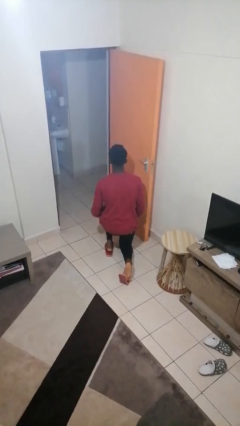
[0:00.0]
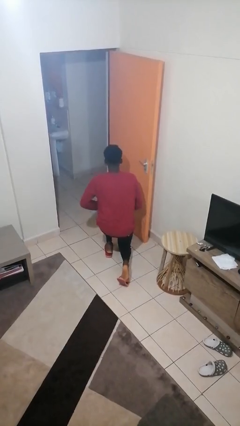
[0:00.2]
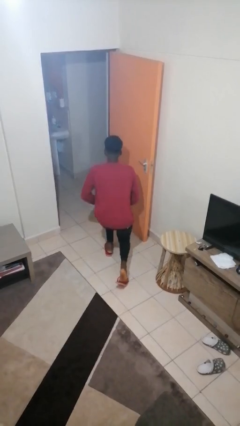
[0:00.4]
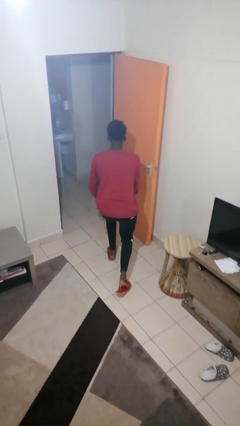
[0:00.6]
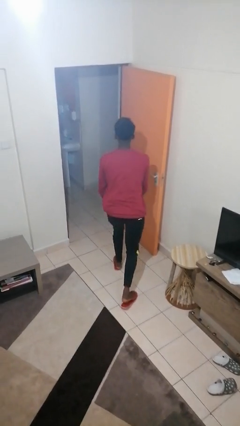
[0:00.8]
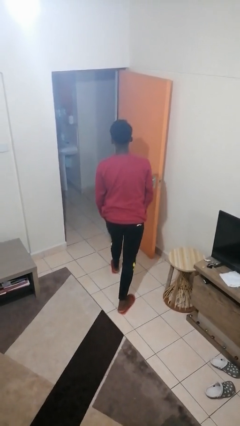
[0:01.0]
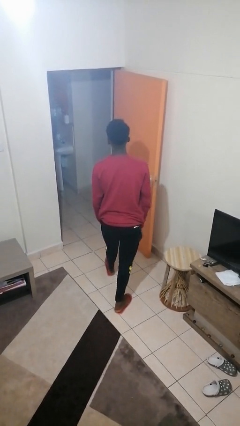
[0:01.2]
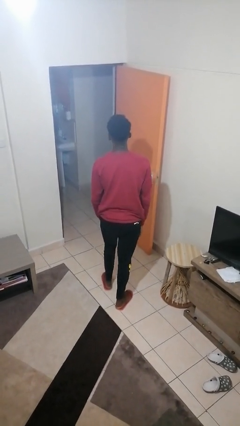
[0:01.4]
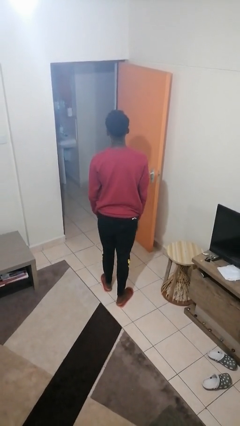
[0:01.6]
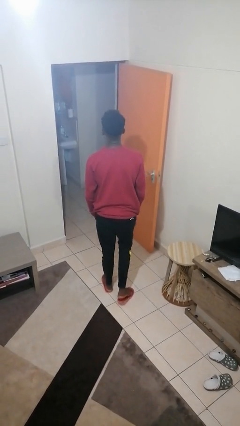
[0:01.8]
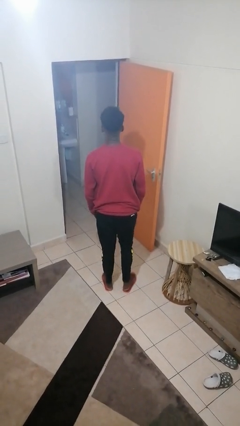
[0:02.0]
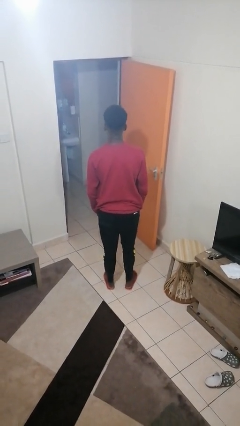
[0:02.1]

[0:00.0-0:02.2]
person stands up from floor

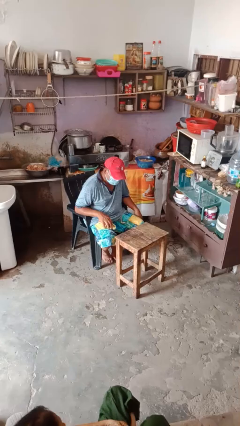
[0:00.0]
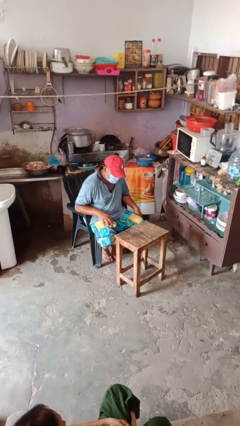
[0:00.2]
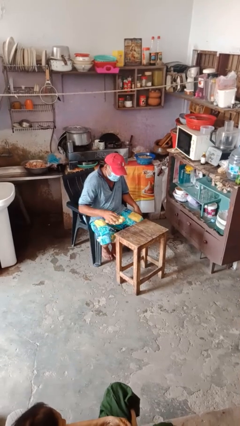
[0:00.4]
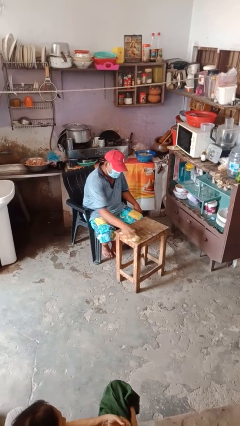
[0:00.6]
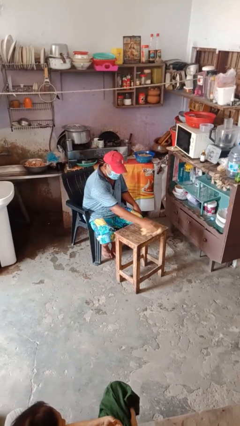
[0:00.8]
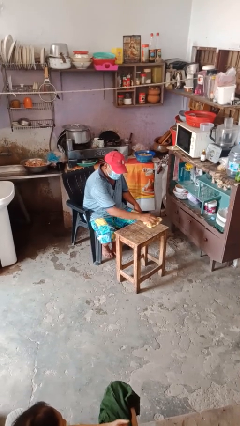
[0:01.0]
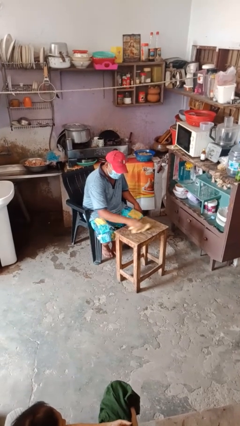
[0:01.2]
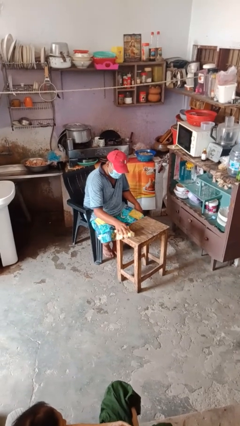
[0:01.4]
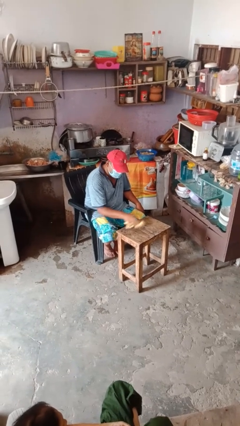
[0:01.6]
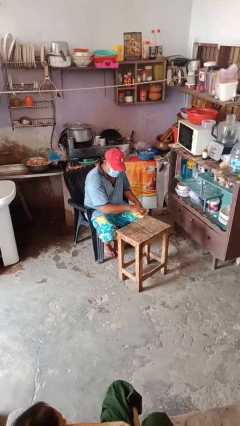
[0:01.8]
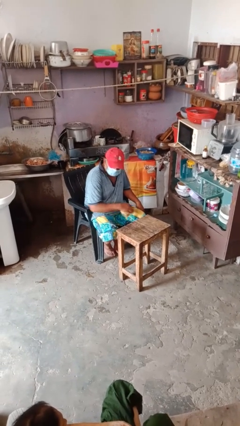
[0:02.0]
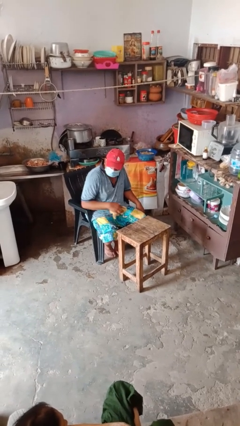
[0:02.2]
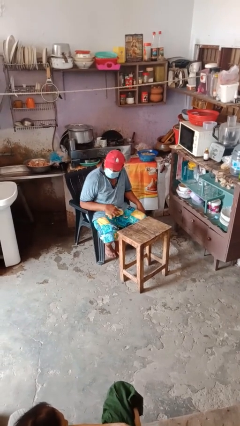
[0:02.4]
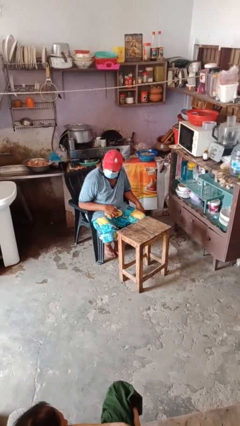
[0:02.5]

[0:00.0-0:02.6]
person cleans table with rag

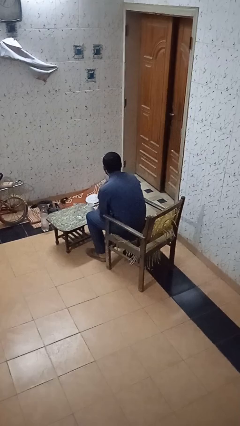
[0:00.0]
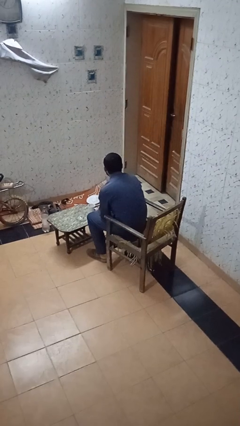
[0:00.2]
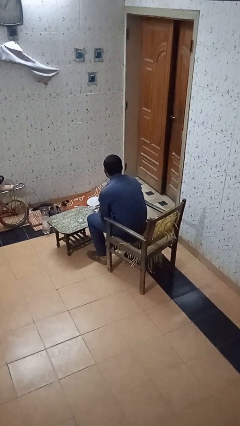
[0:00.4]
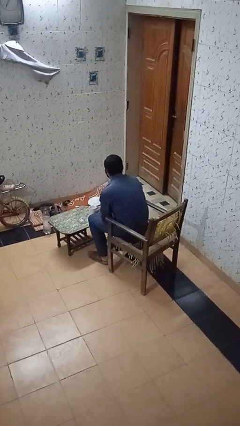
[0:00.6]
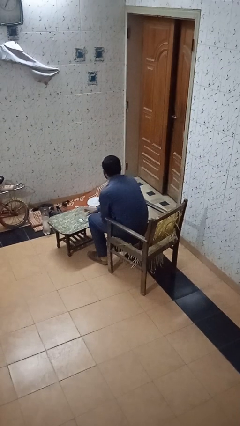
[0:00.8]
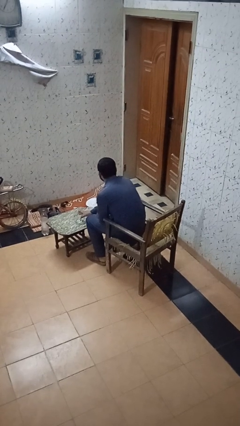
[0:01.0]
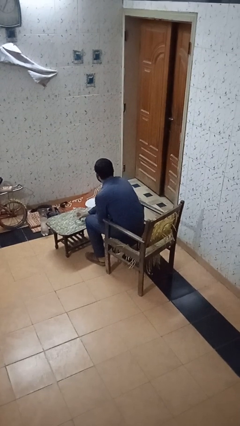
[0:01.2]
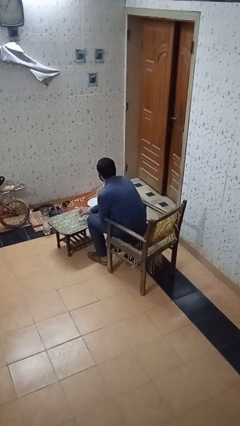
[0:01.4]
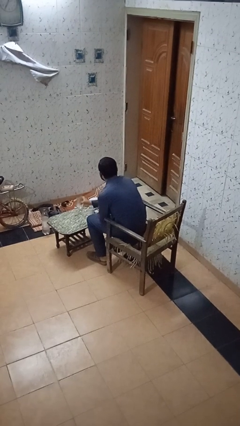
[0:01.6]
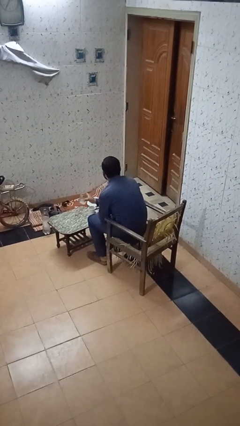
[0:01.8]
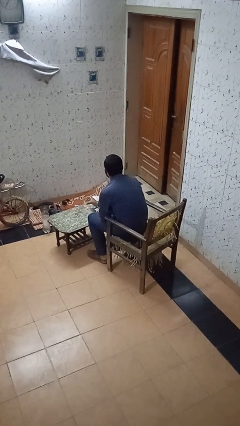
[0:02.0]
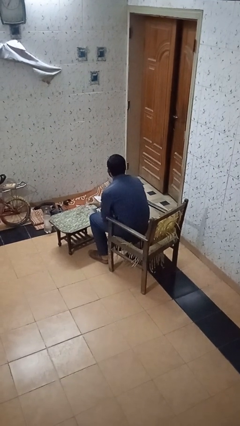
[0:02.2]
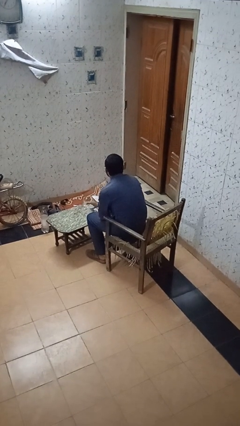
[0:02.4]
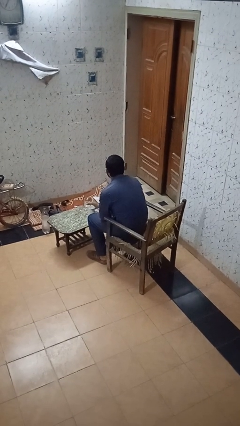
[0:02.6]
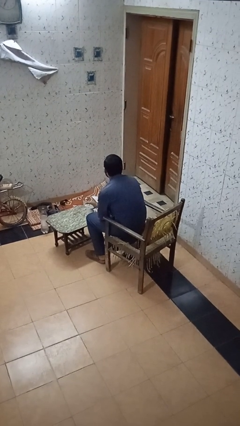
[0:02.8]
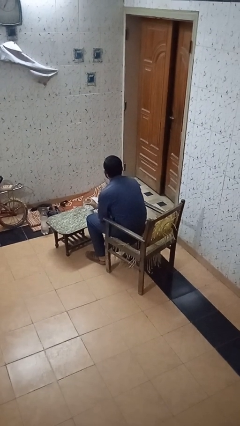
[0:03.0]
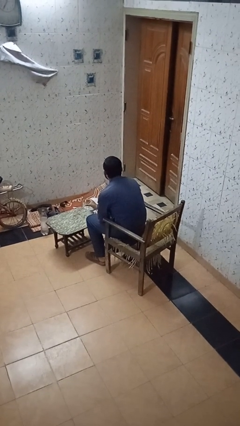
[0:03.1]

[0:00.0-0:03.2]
person picks up object from table

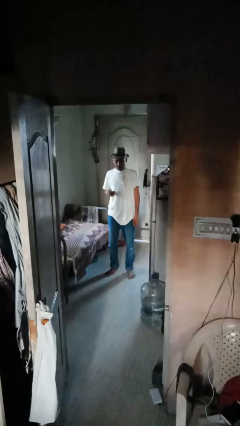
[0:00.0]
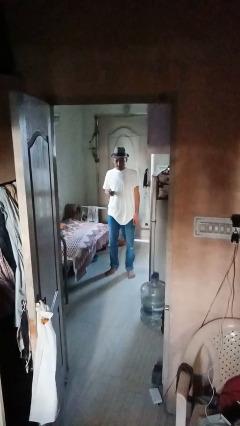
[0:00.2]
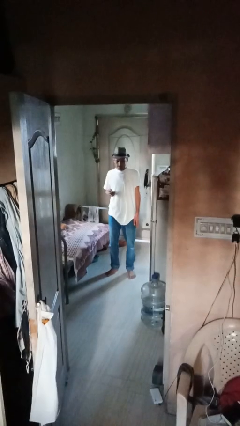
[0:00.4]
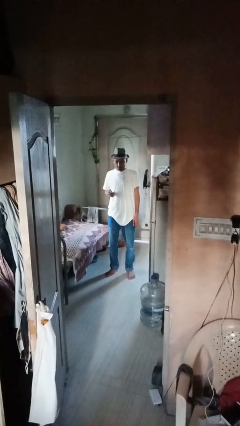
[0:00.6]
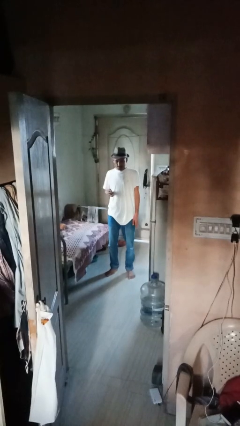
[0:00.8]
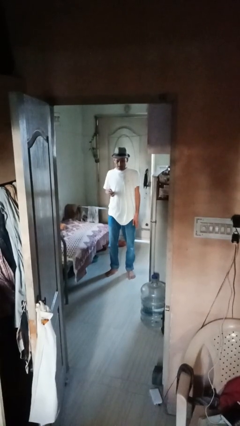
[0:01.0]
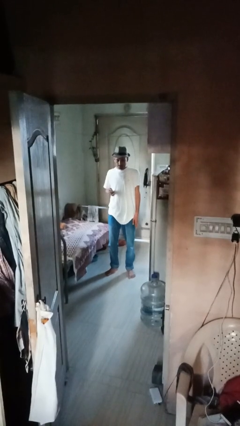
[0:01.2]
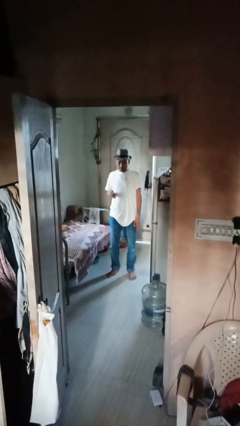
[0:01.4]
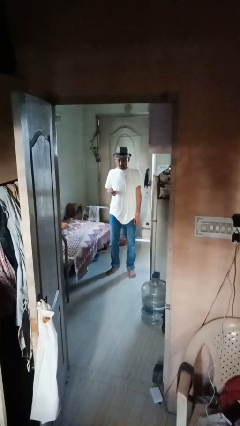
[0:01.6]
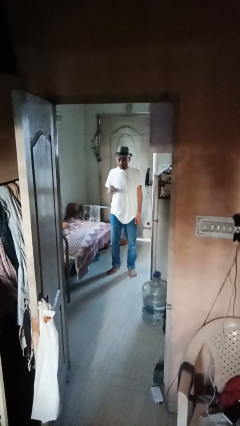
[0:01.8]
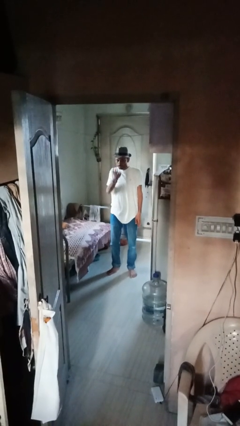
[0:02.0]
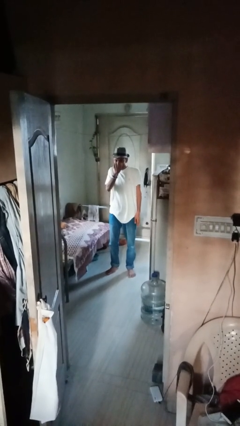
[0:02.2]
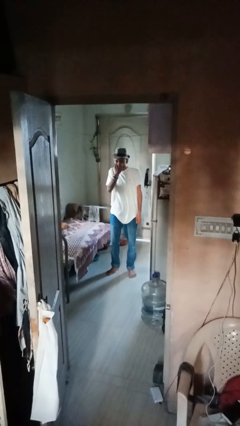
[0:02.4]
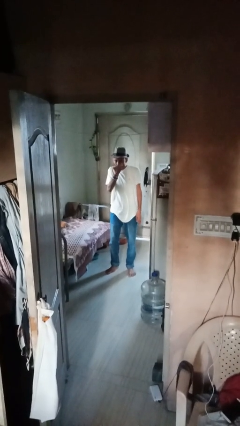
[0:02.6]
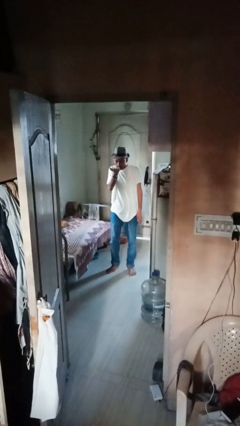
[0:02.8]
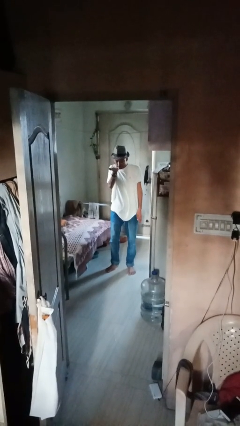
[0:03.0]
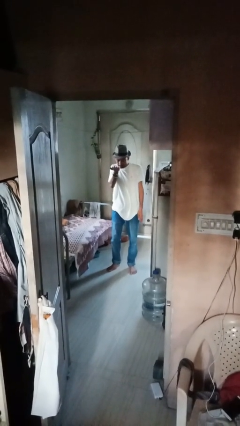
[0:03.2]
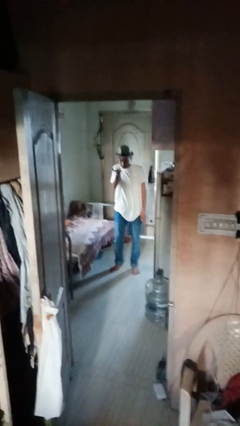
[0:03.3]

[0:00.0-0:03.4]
person gestures blow kiss

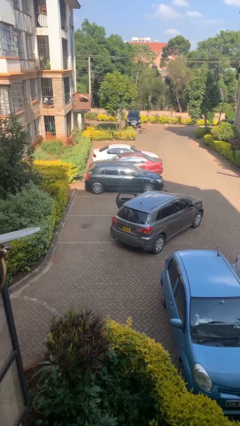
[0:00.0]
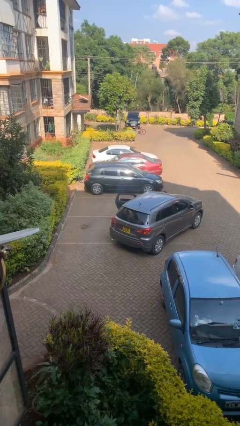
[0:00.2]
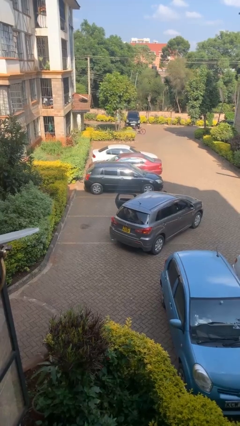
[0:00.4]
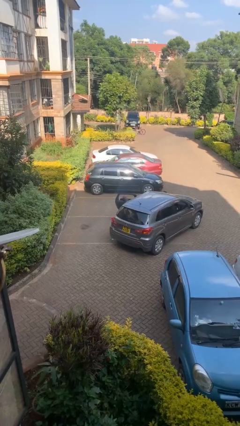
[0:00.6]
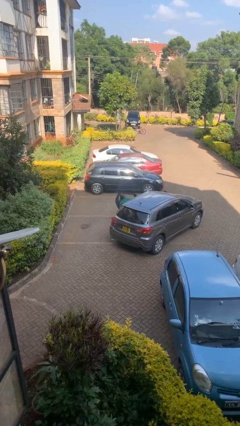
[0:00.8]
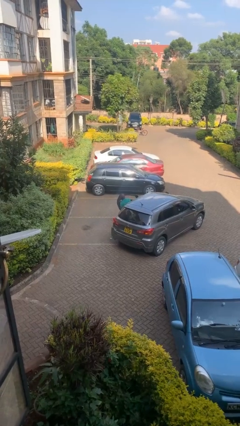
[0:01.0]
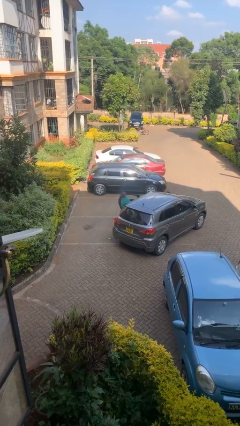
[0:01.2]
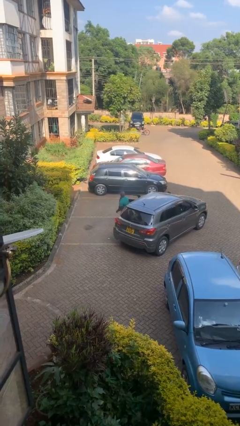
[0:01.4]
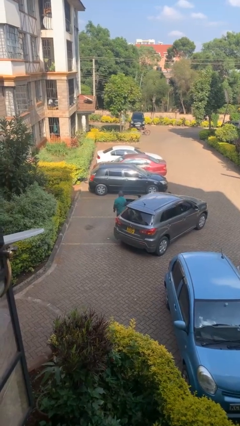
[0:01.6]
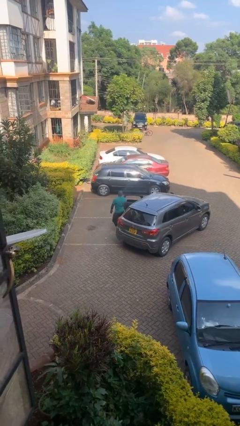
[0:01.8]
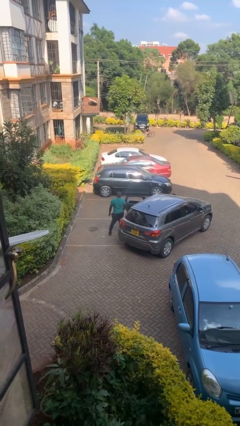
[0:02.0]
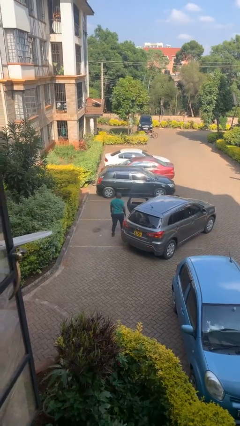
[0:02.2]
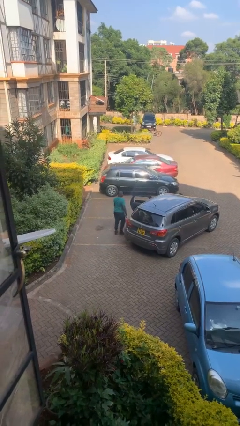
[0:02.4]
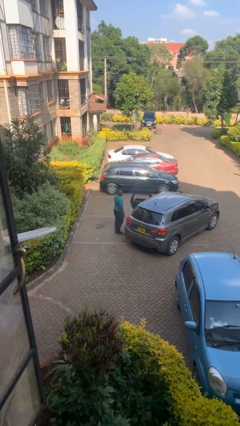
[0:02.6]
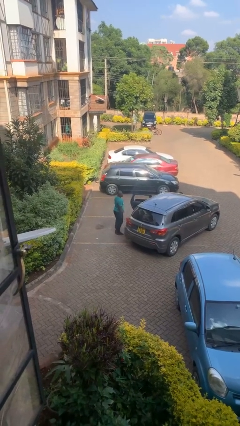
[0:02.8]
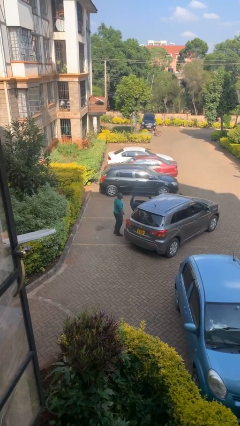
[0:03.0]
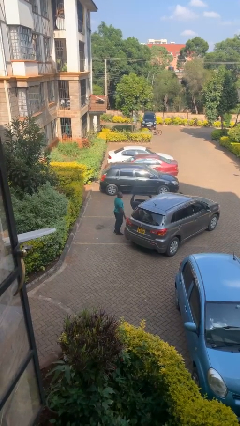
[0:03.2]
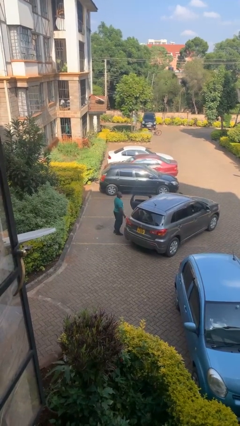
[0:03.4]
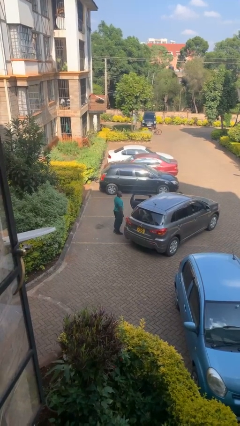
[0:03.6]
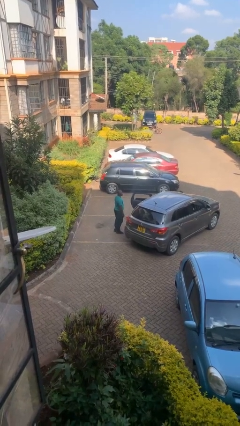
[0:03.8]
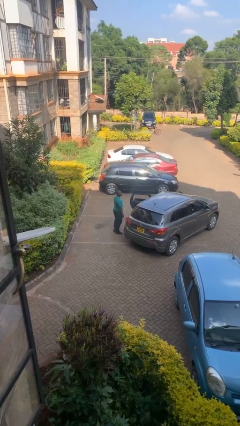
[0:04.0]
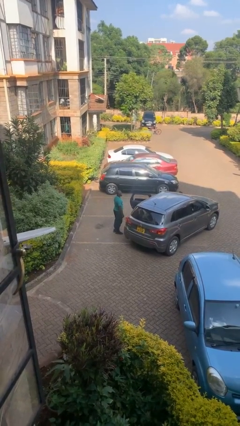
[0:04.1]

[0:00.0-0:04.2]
person exits car

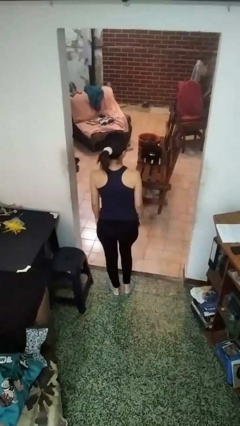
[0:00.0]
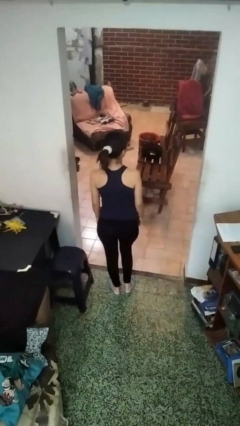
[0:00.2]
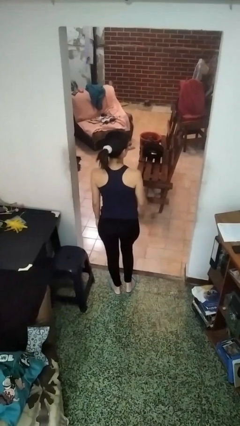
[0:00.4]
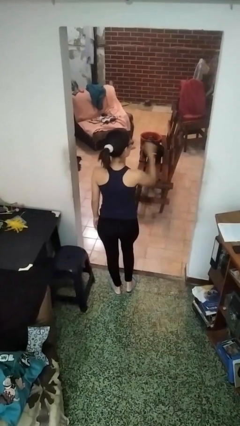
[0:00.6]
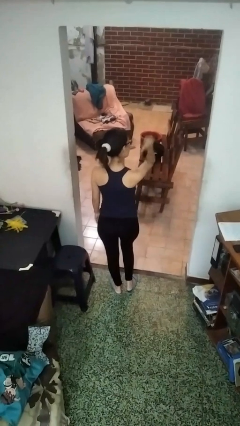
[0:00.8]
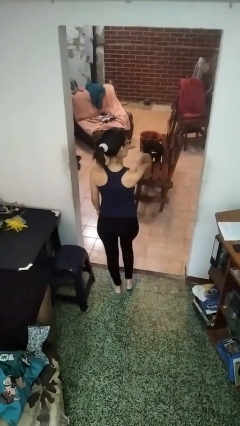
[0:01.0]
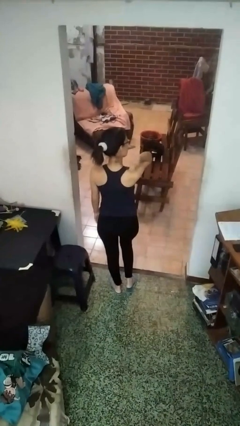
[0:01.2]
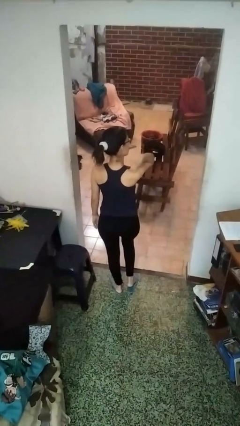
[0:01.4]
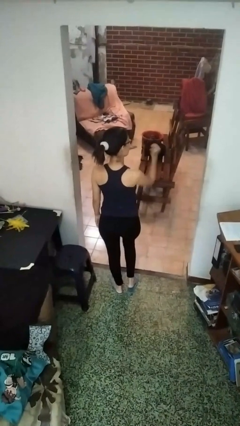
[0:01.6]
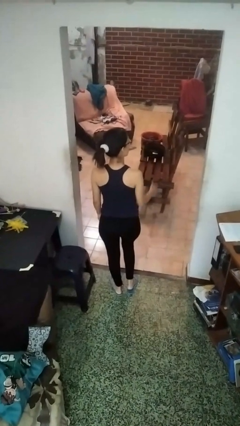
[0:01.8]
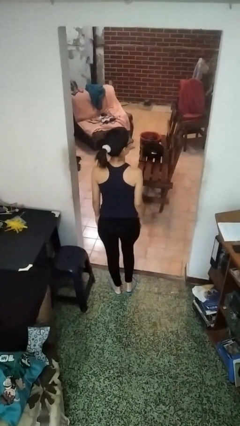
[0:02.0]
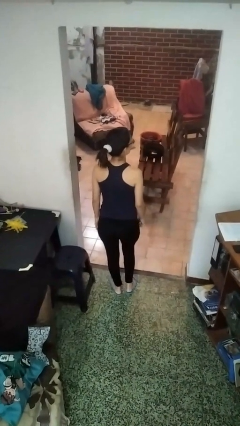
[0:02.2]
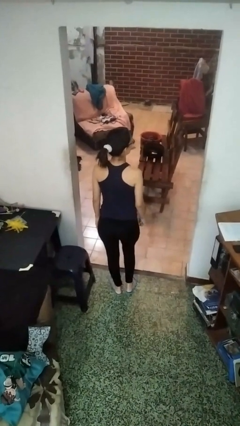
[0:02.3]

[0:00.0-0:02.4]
person gestures behind me
